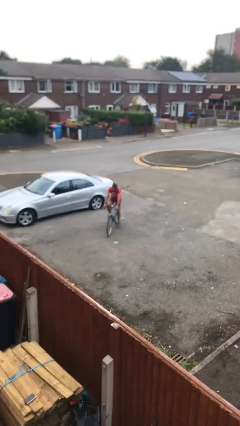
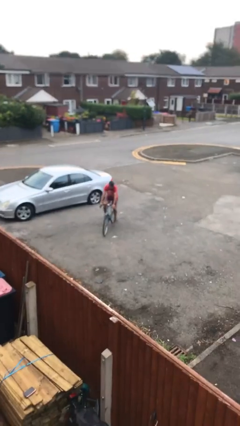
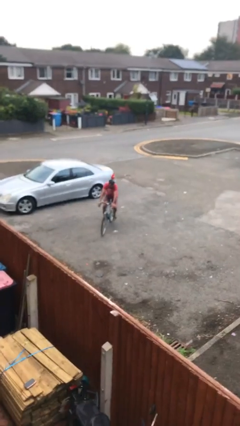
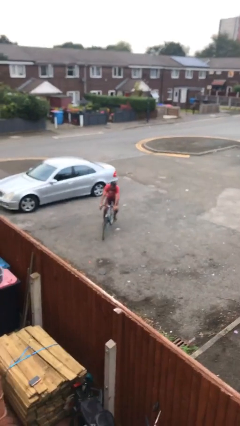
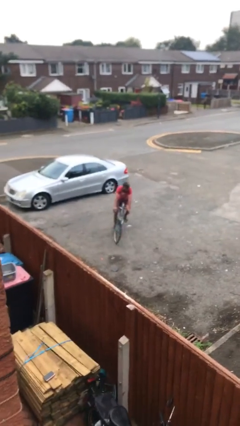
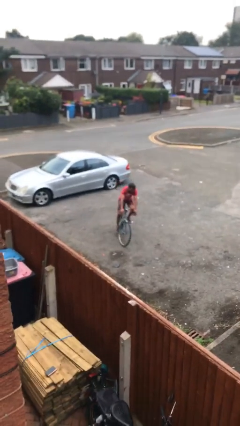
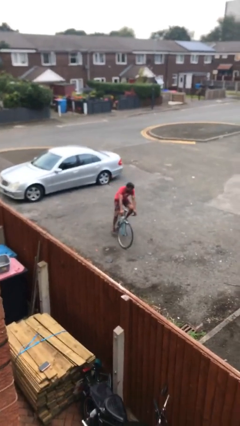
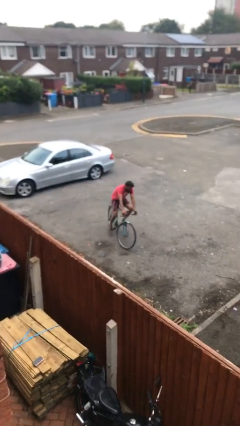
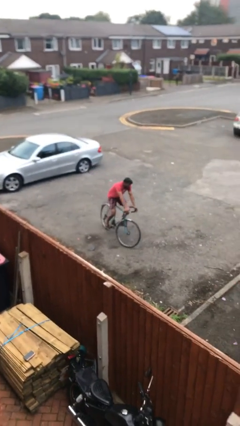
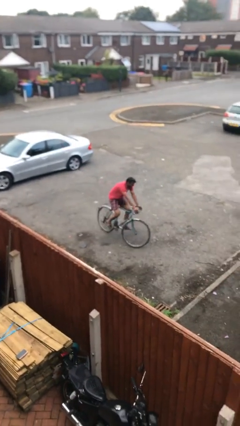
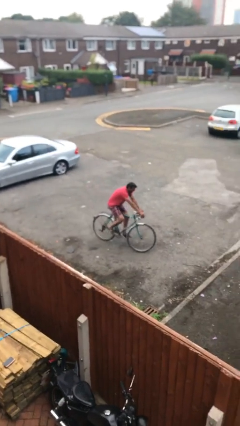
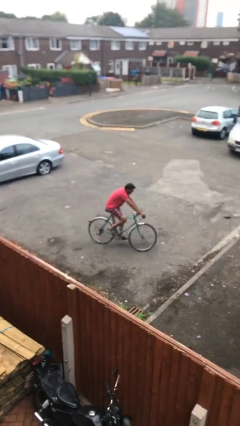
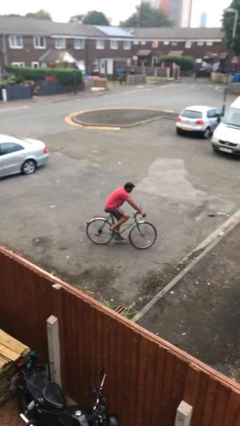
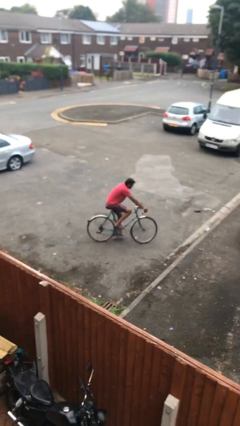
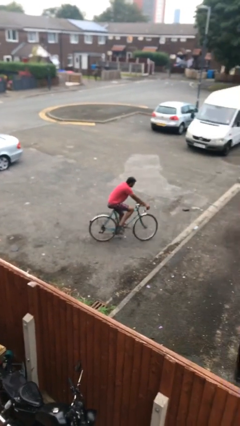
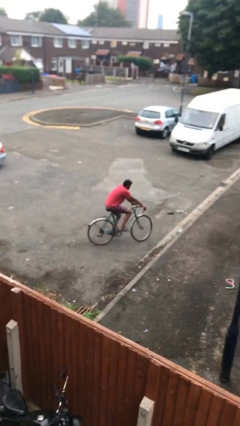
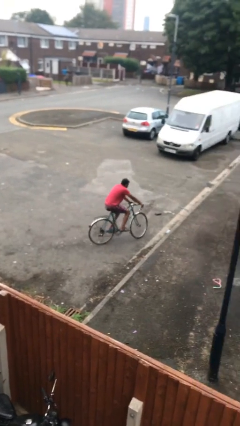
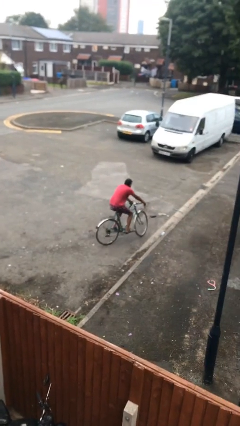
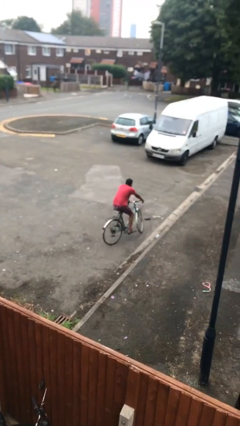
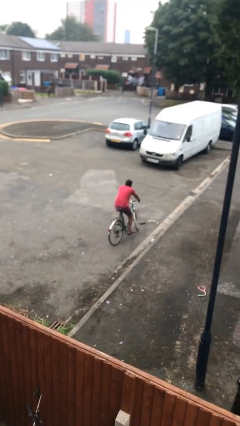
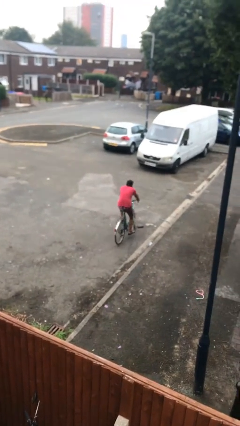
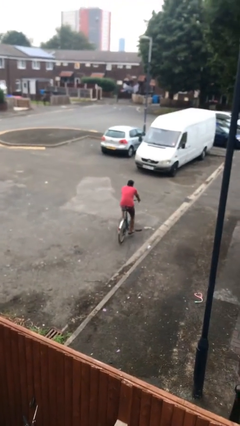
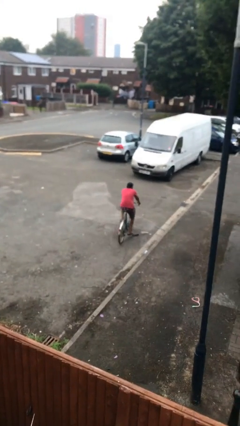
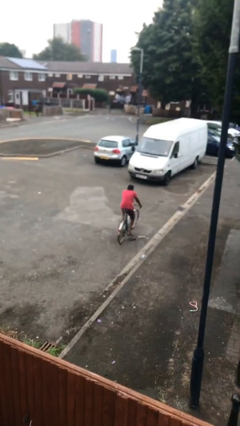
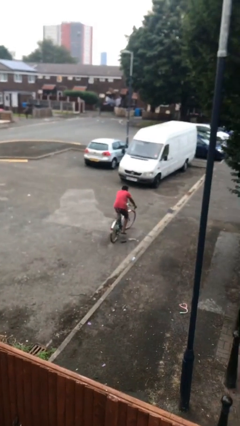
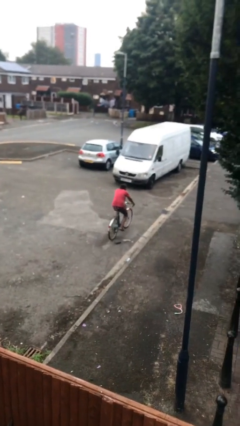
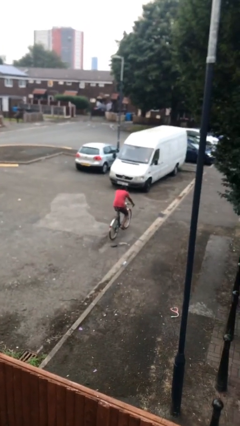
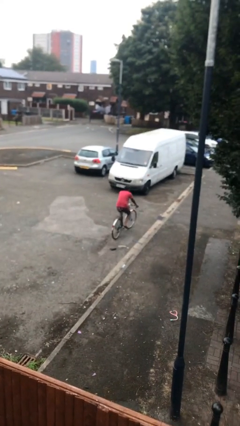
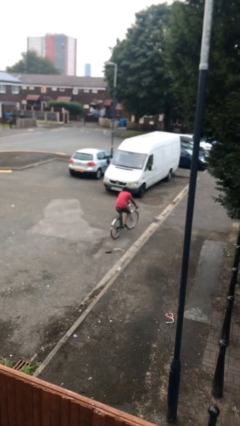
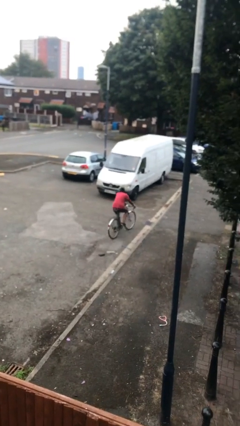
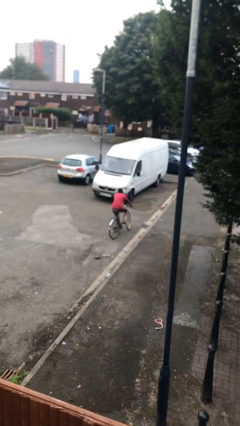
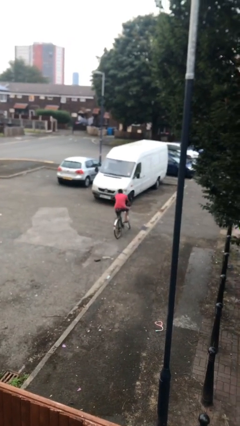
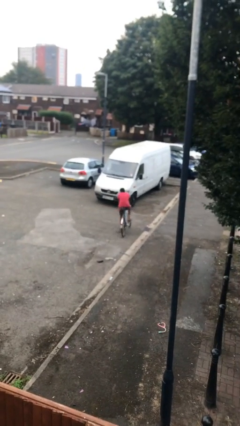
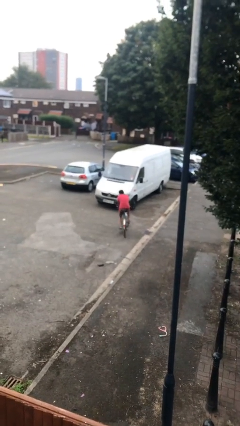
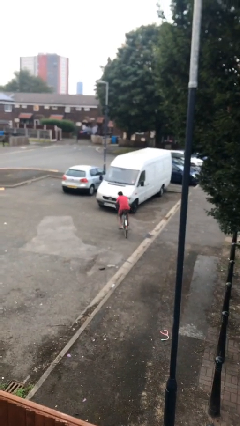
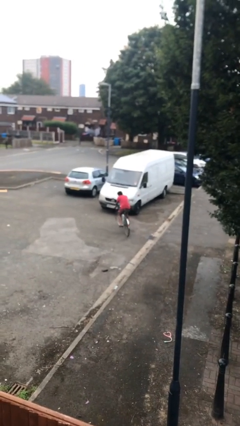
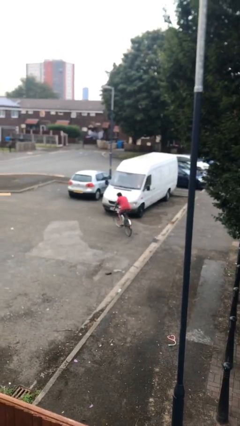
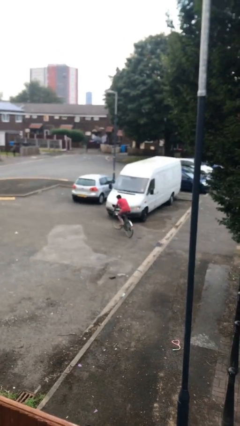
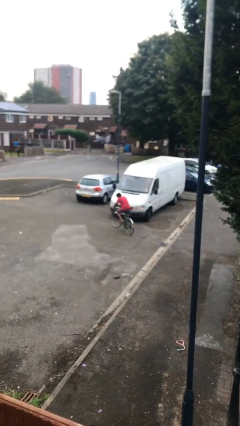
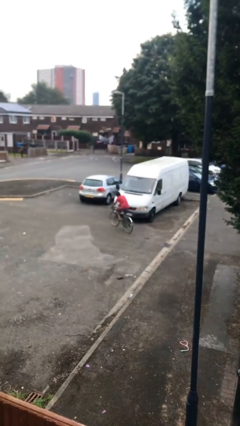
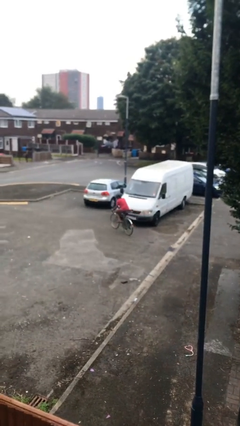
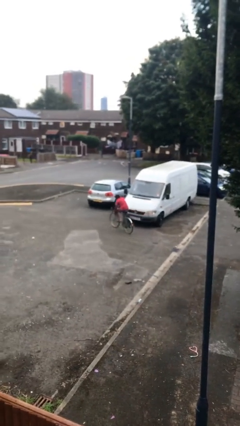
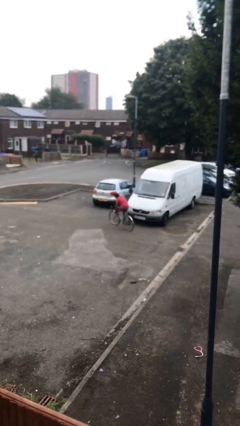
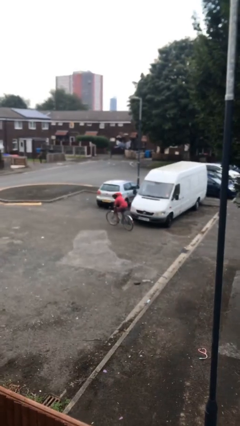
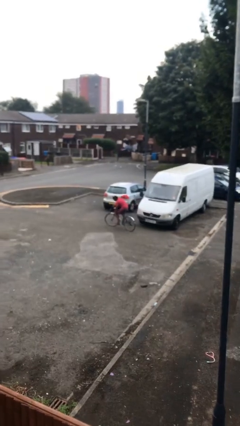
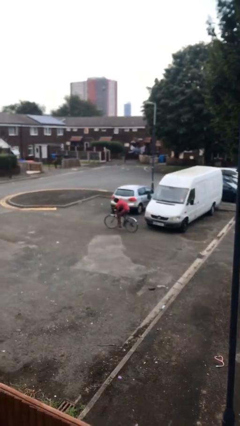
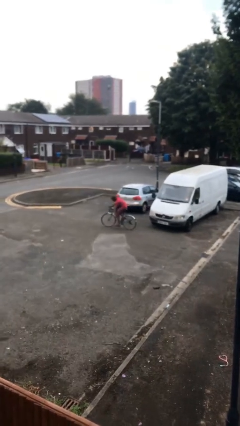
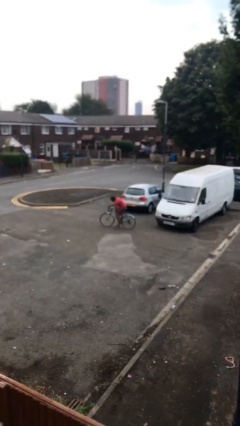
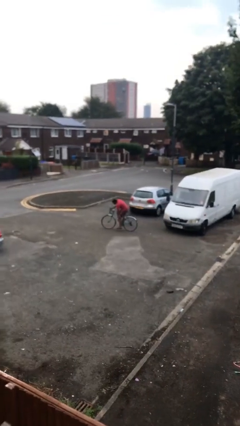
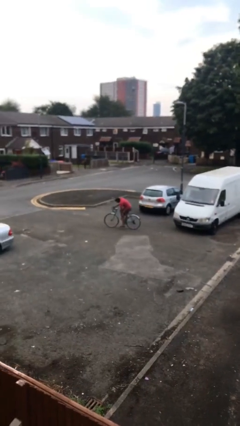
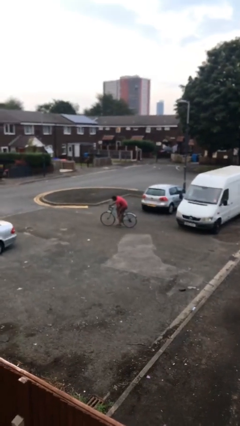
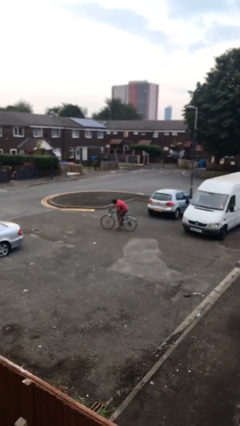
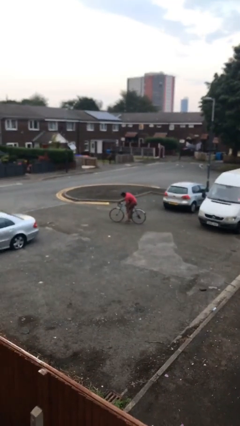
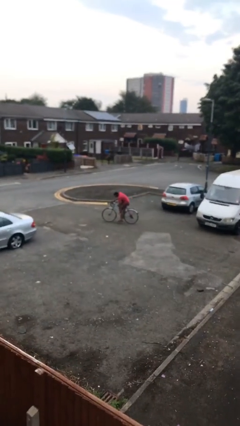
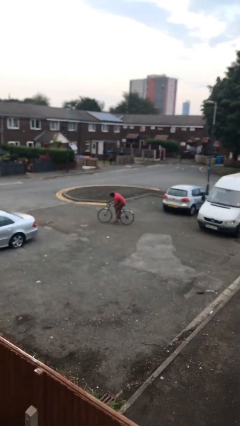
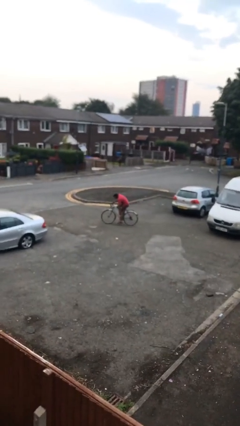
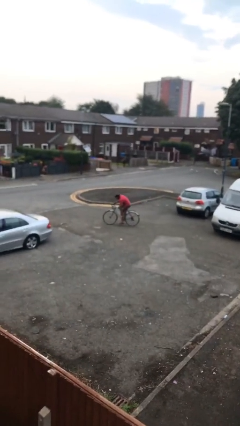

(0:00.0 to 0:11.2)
person rides bicycle

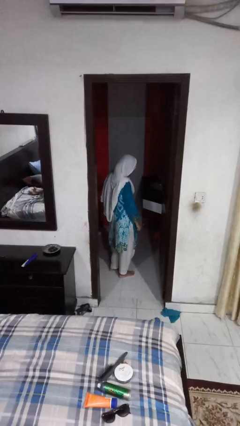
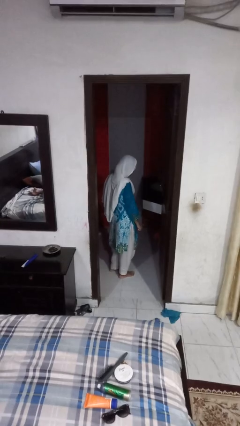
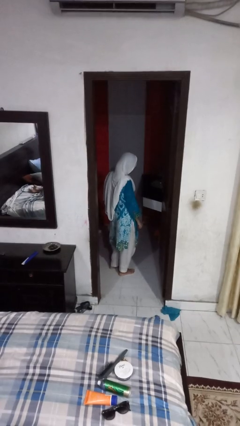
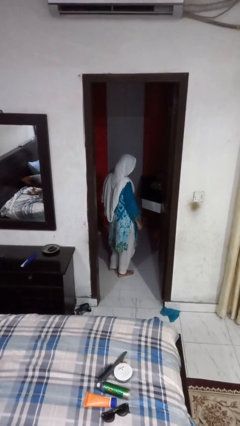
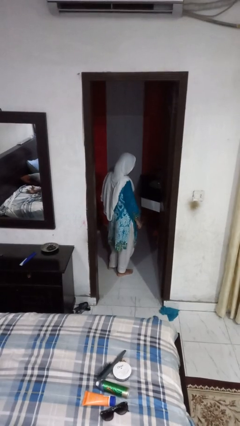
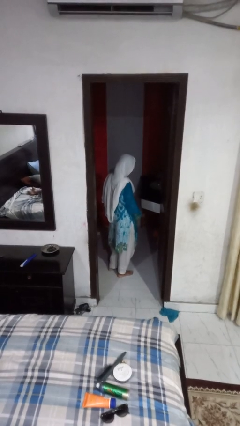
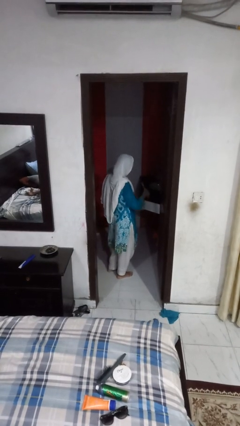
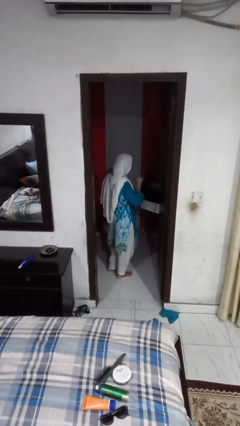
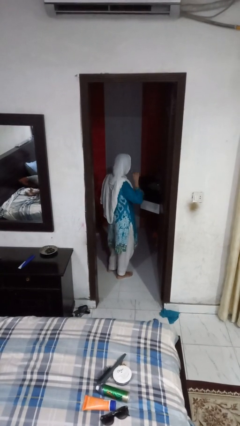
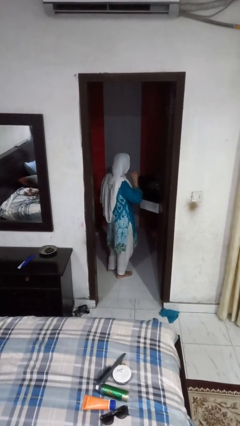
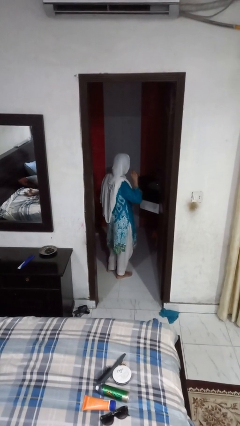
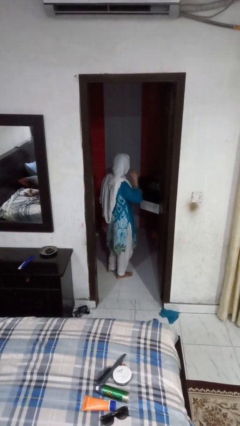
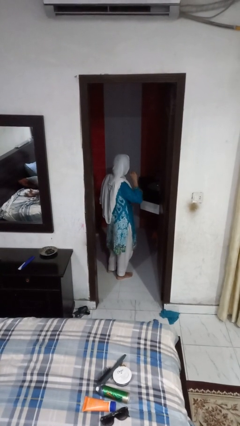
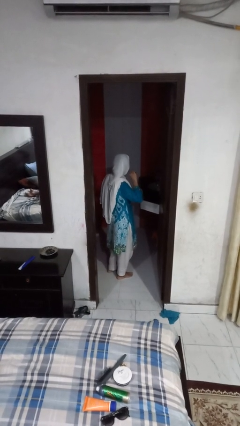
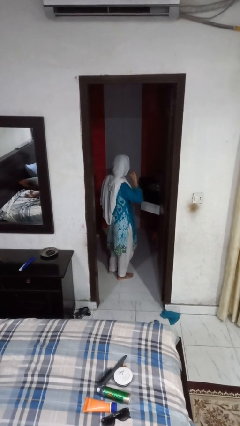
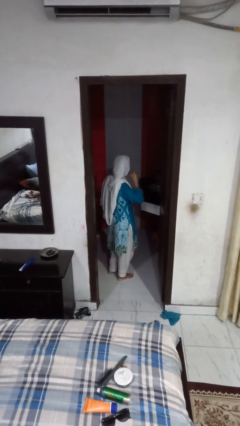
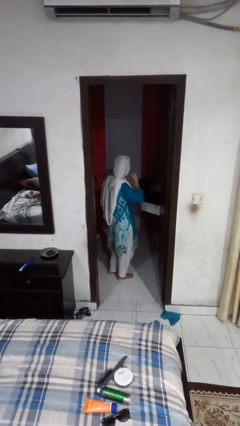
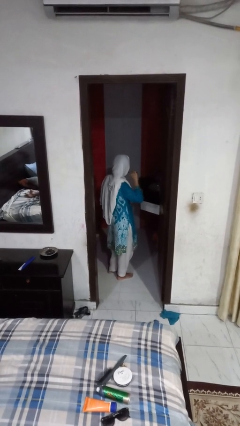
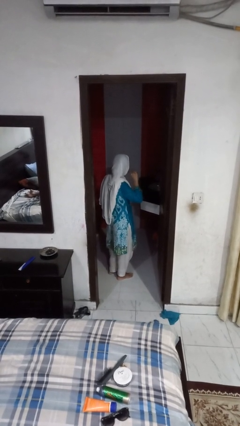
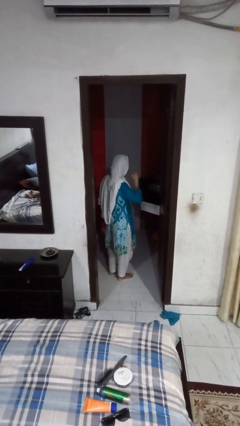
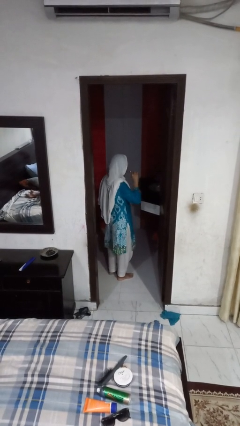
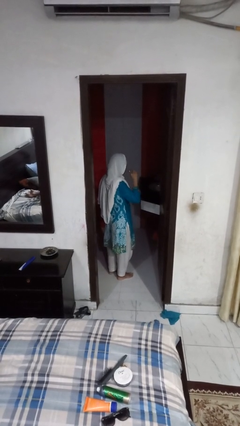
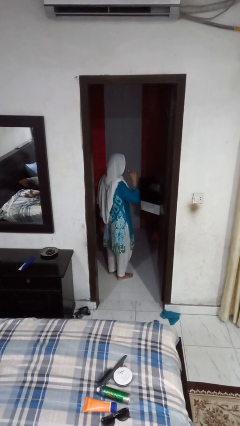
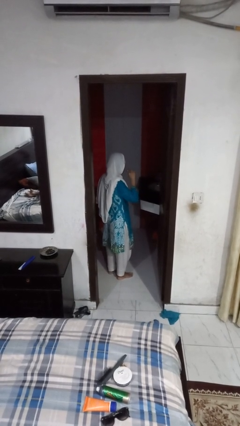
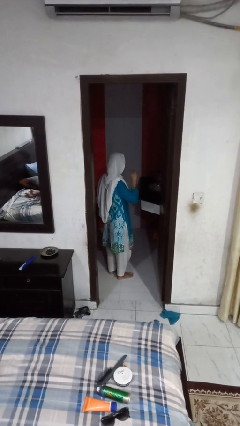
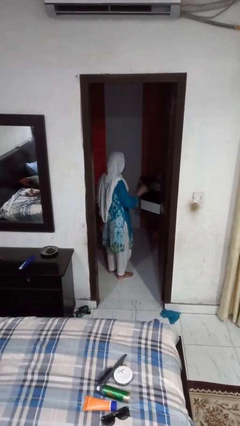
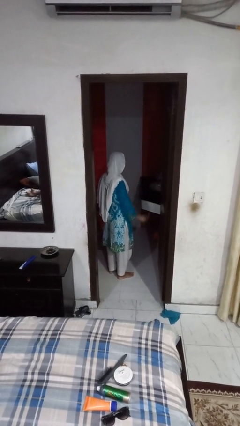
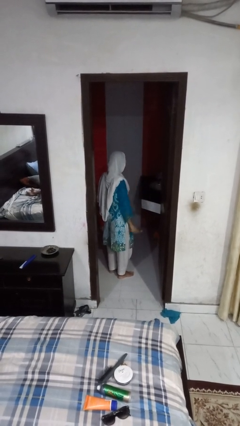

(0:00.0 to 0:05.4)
person brushes teeth

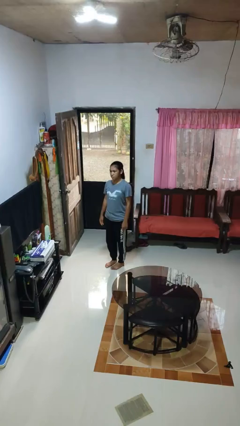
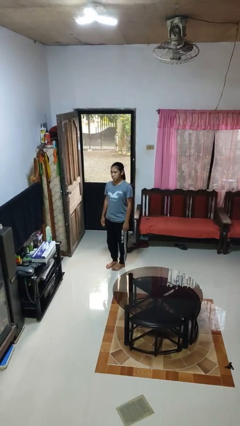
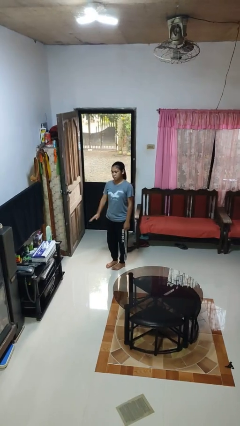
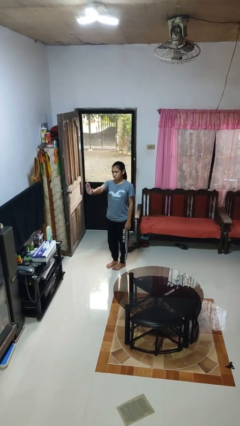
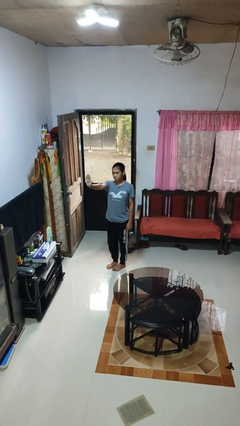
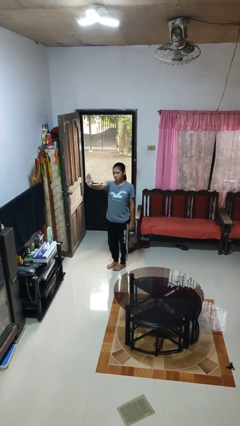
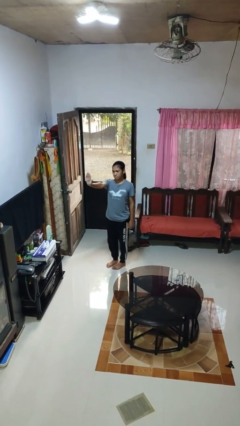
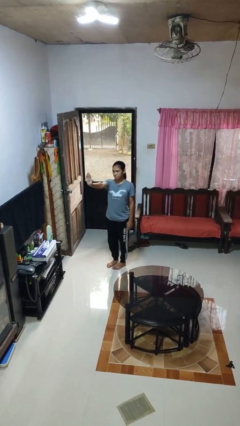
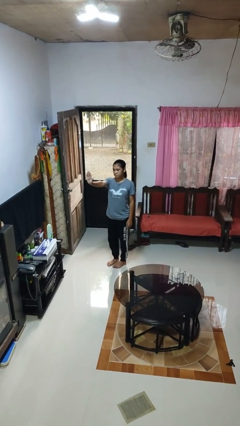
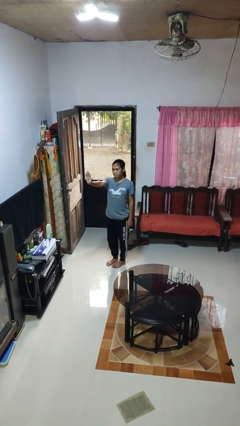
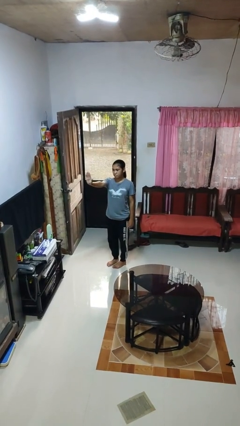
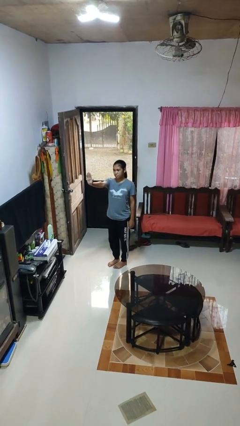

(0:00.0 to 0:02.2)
person gestures stop
